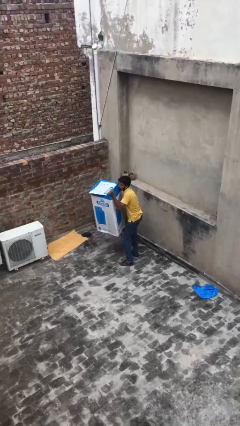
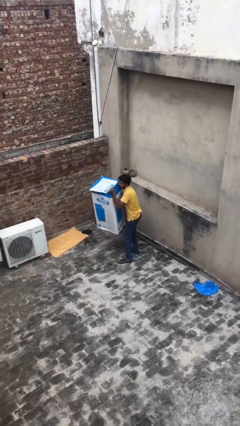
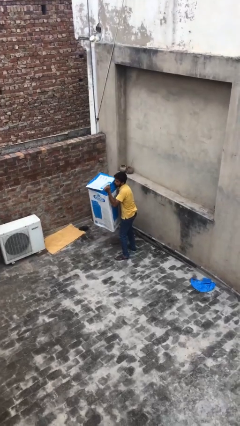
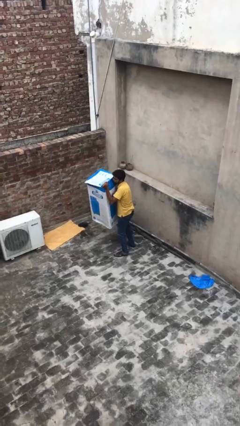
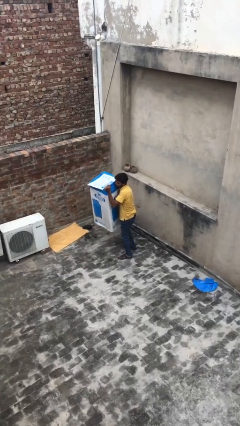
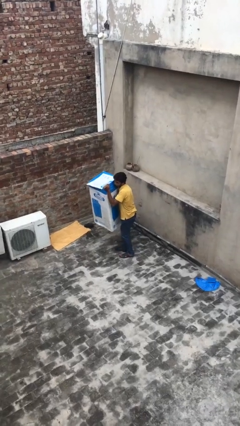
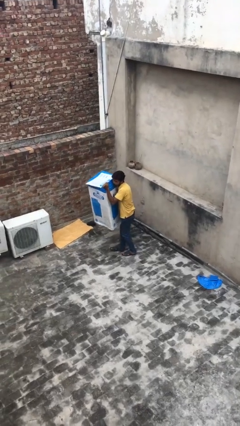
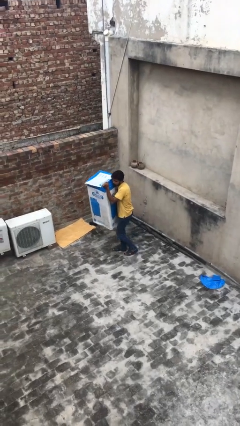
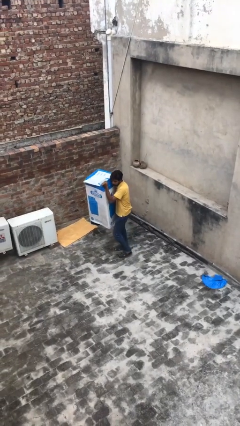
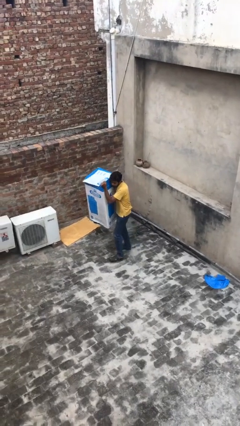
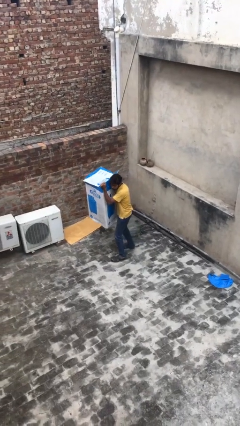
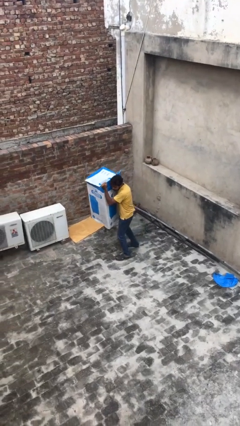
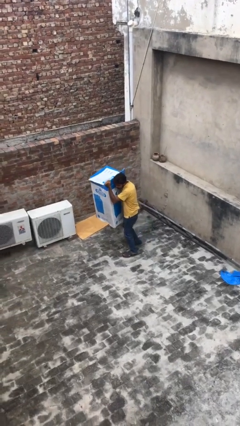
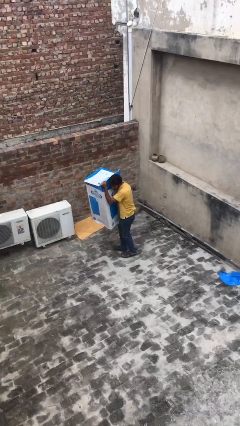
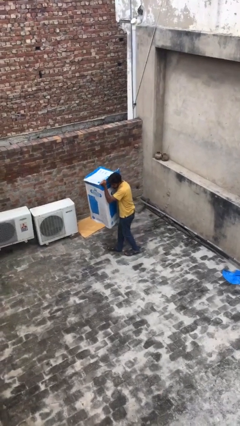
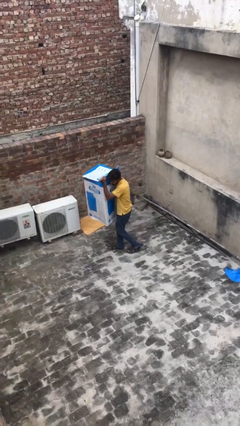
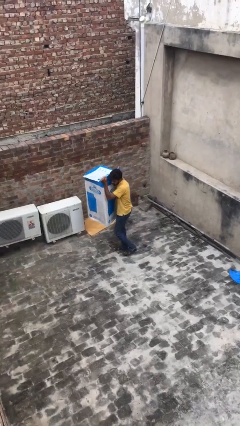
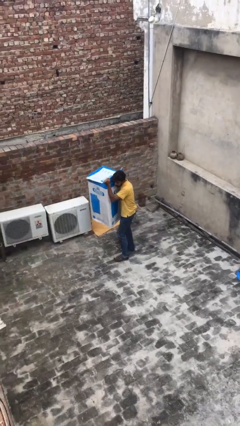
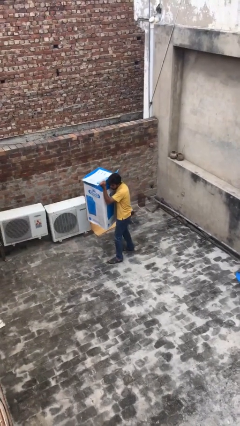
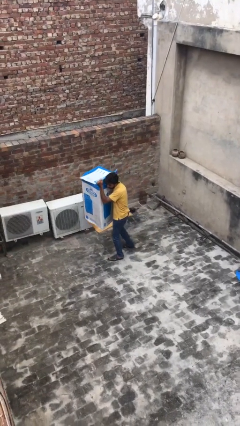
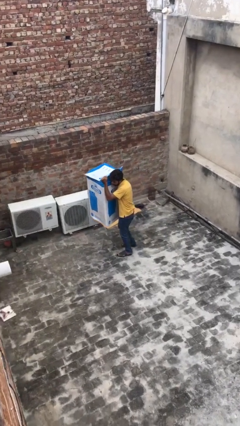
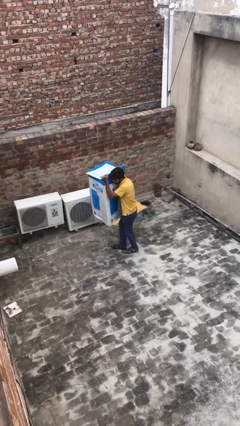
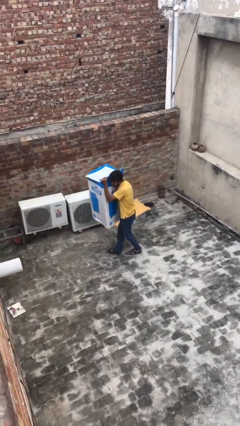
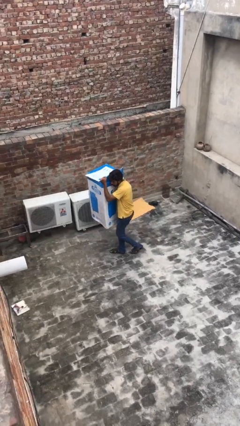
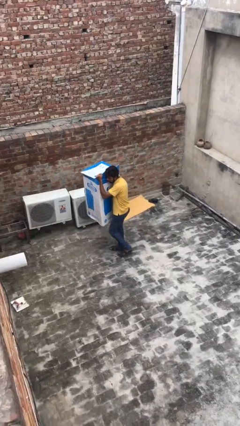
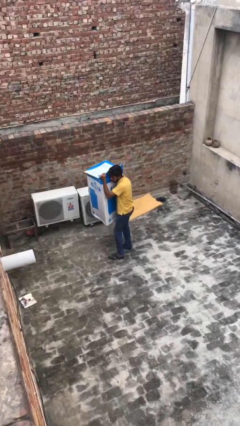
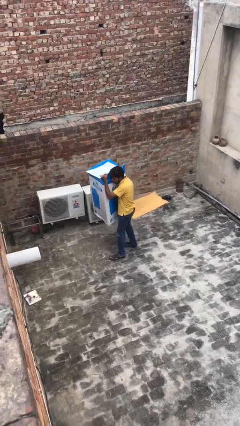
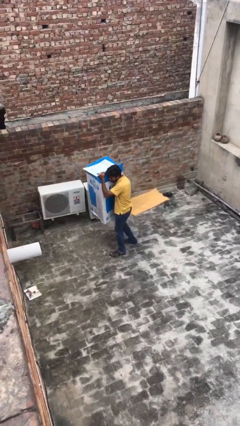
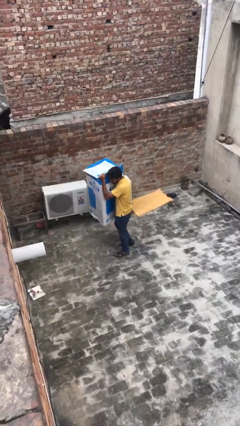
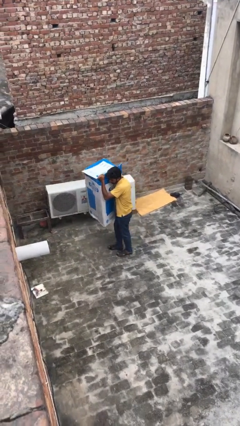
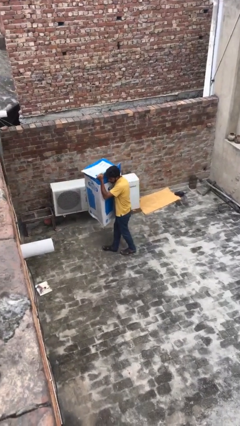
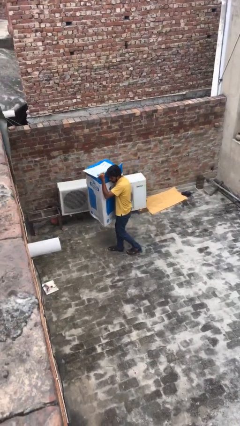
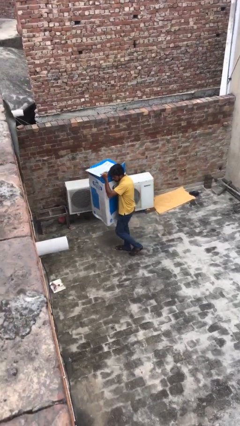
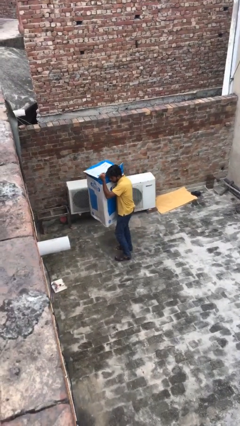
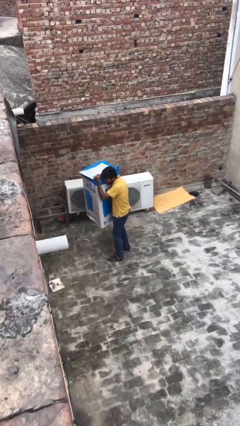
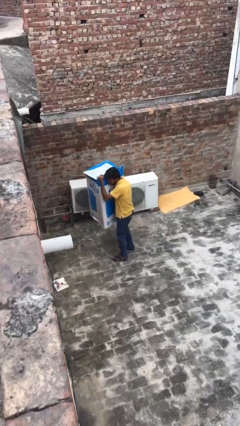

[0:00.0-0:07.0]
person carries heavy object

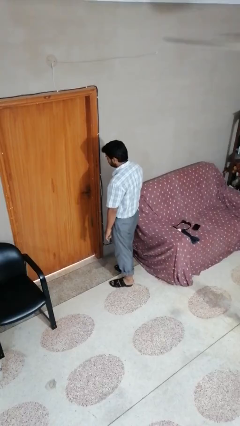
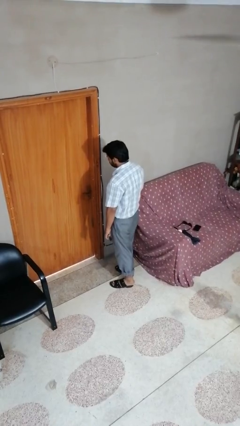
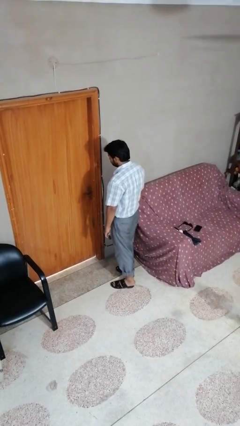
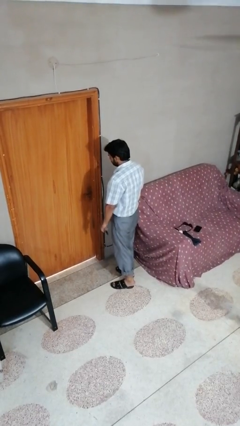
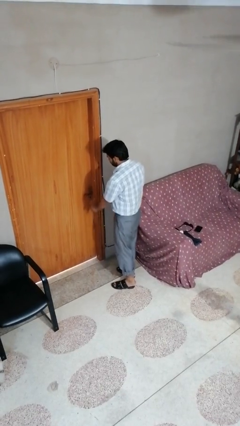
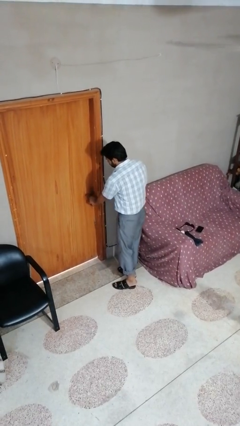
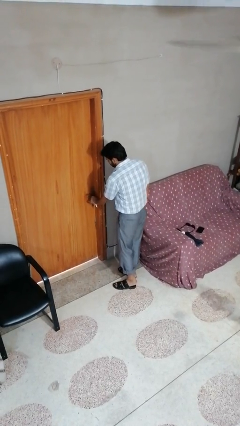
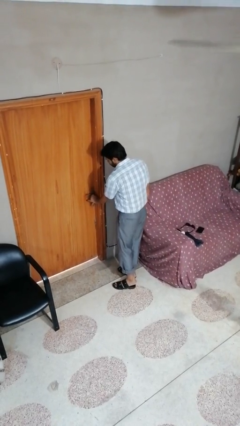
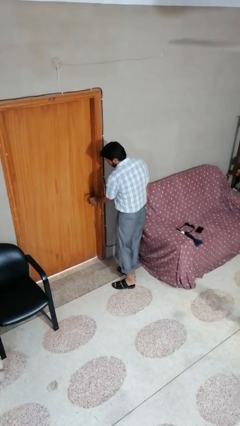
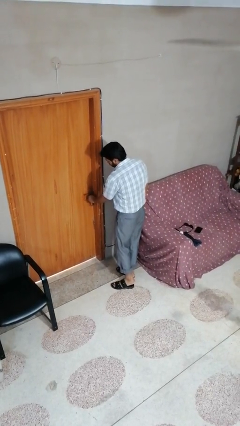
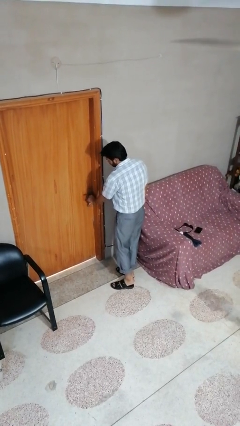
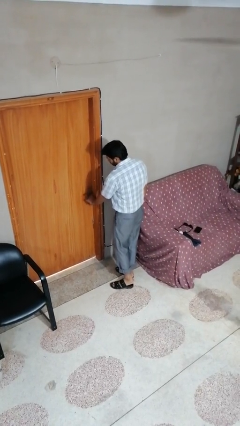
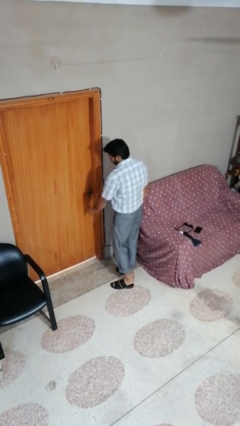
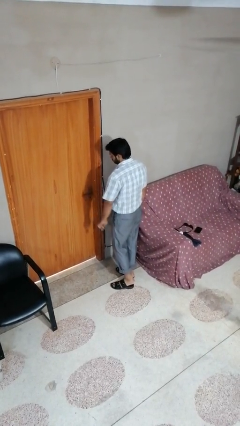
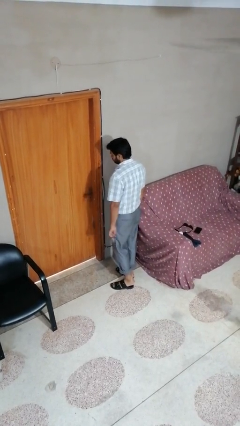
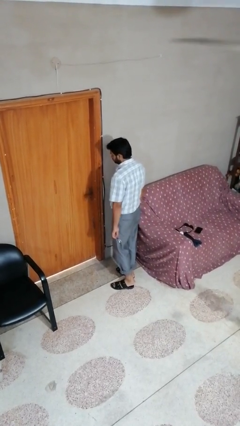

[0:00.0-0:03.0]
person unlocks door with keys

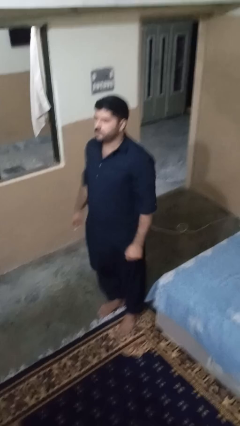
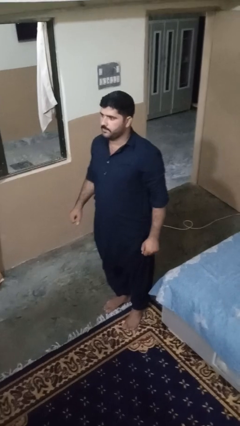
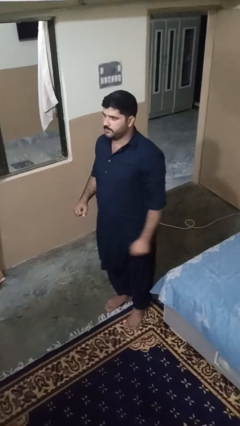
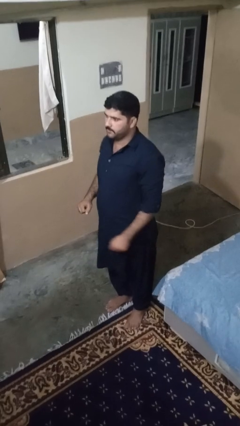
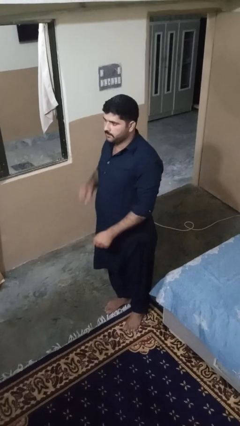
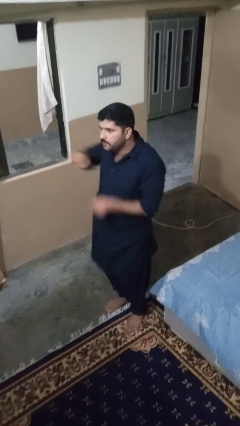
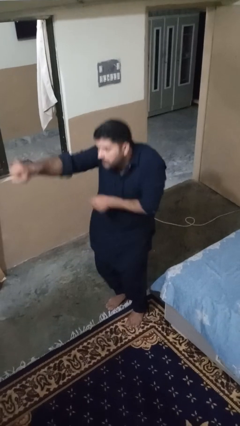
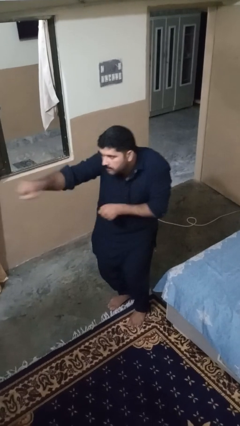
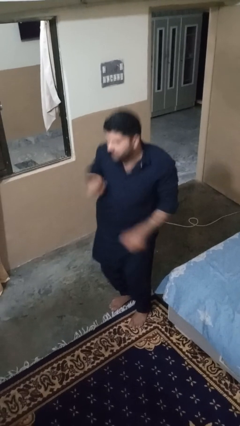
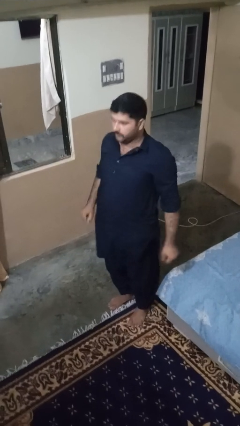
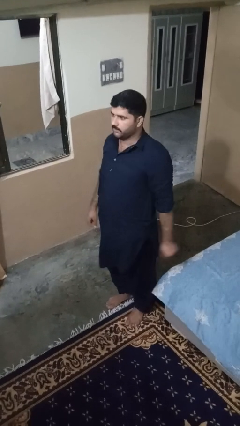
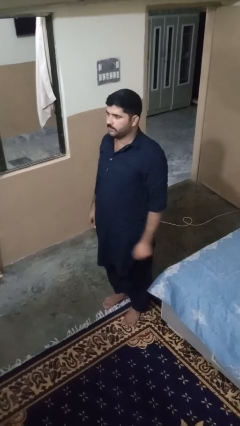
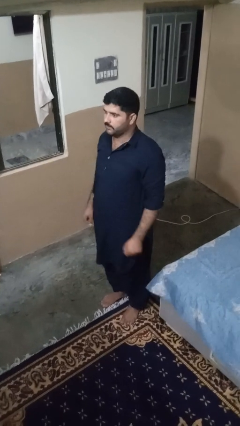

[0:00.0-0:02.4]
person karate chop

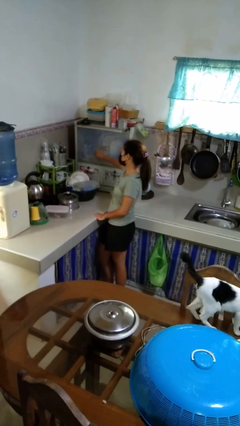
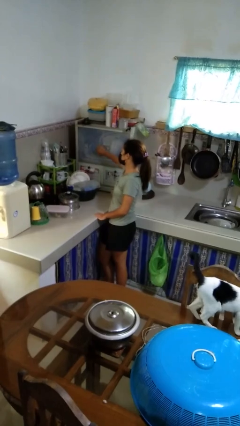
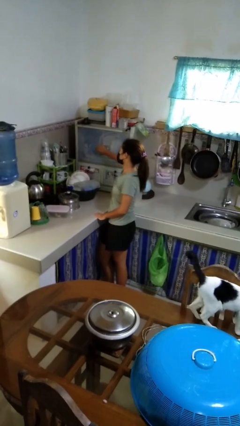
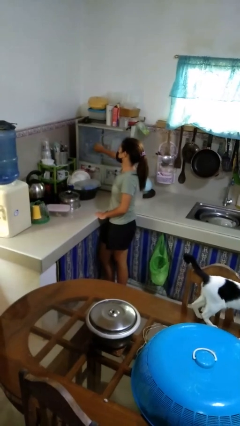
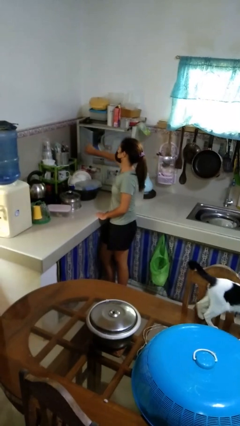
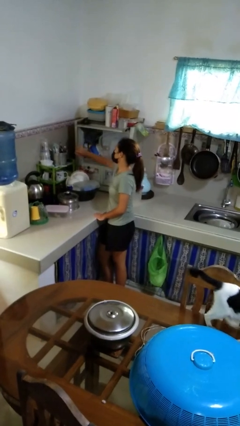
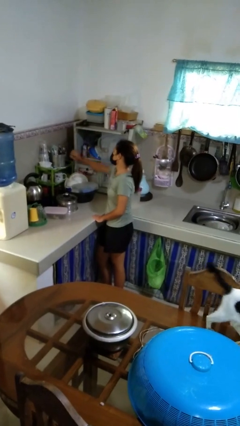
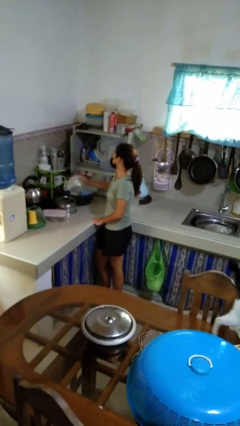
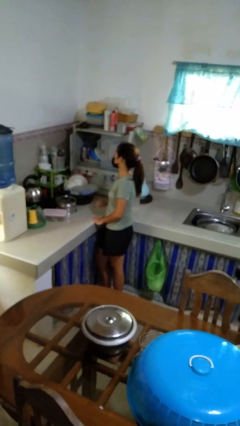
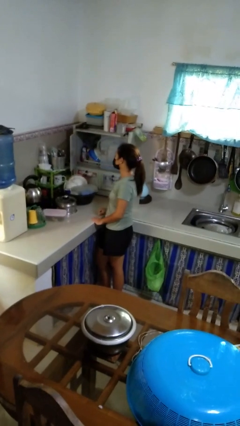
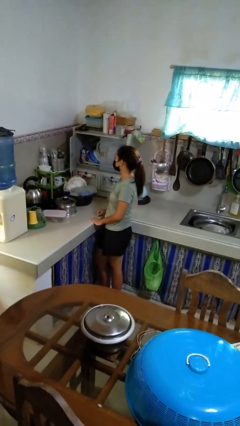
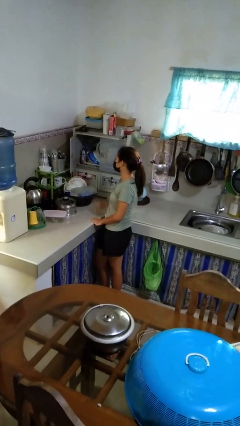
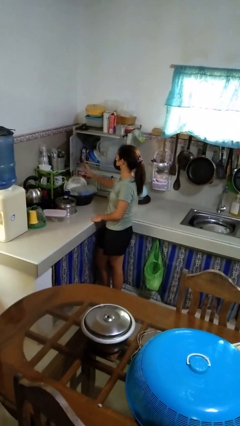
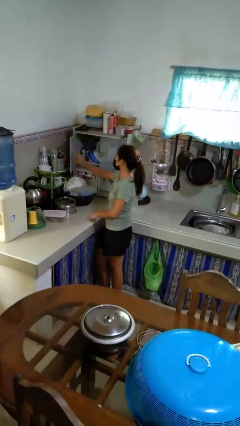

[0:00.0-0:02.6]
person opens kitchen drawer

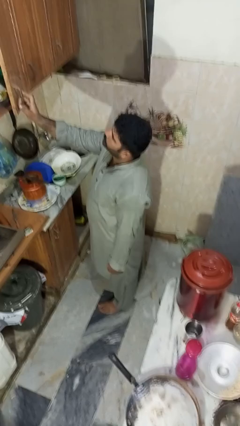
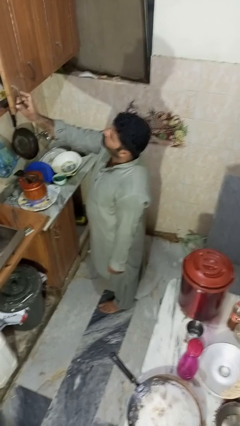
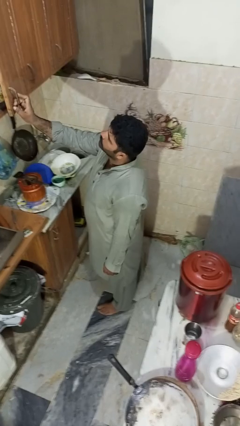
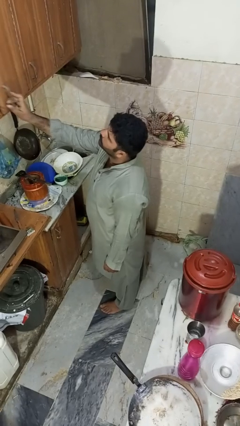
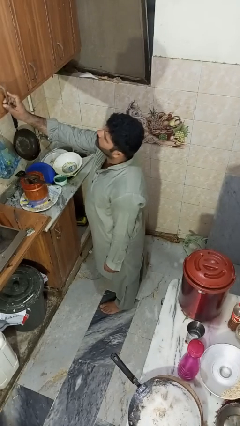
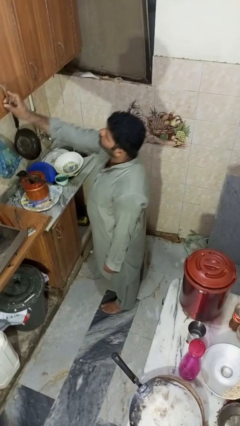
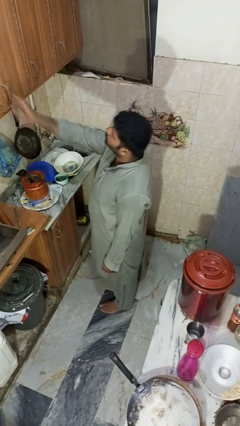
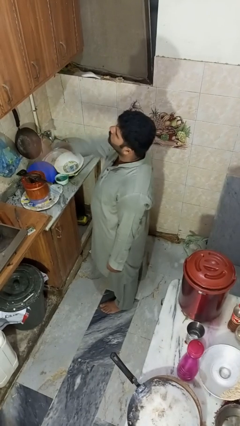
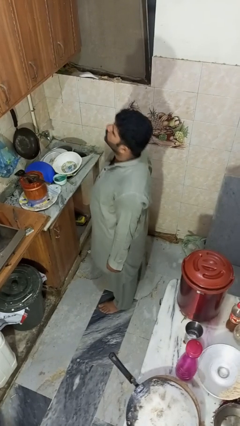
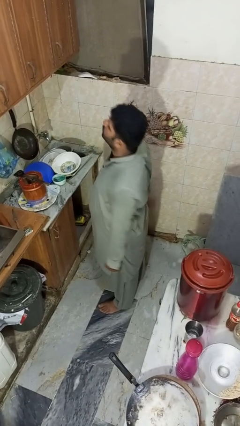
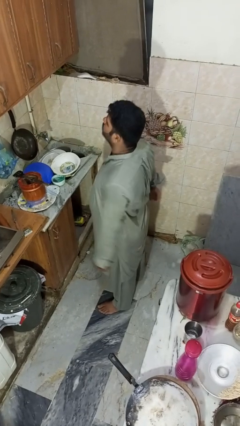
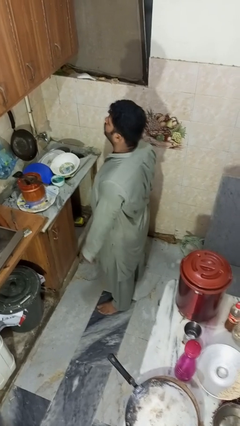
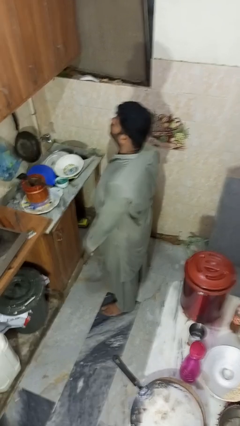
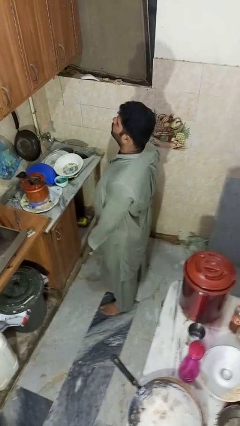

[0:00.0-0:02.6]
person closes cabinet
